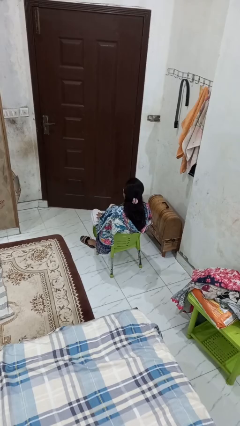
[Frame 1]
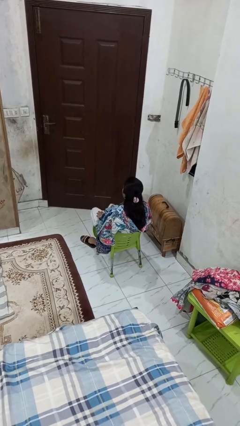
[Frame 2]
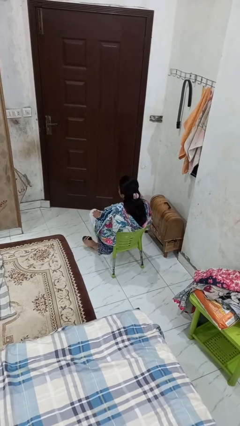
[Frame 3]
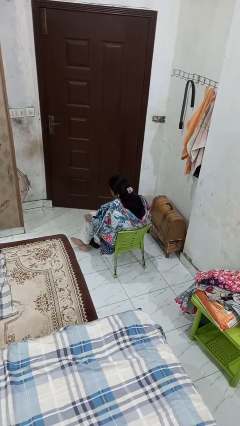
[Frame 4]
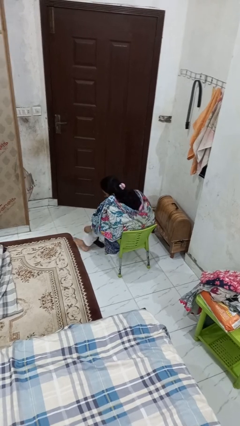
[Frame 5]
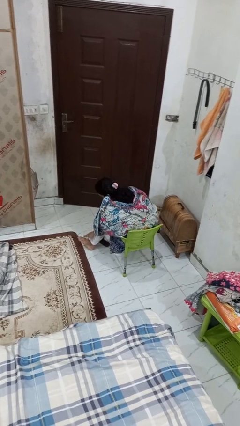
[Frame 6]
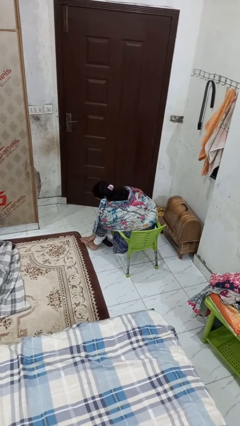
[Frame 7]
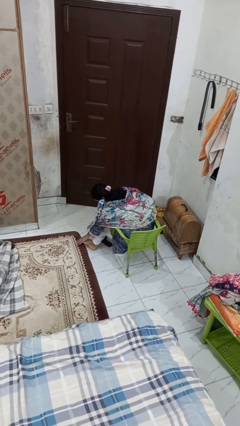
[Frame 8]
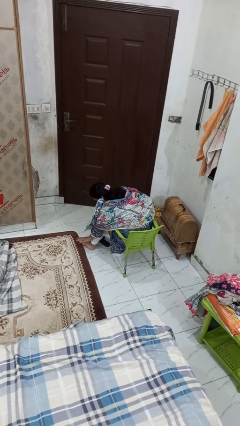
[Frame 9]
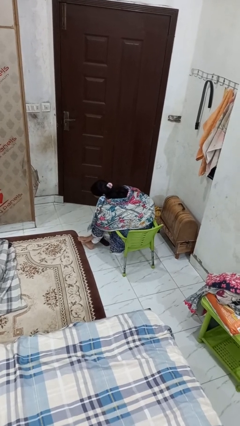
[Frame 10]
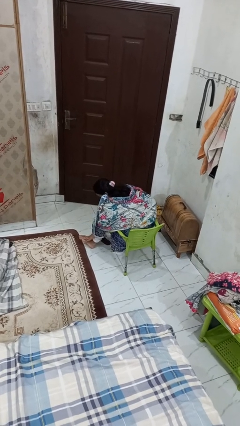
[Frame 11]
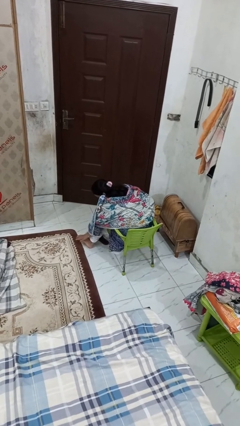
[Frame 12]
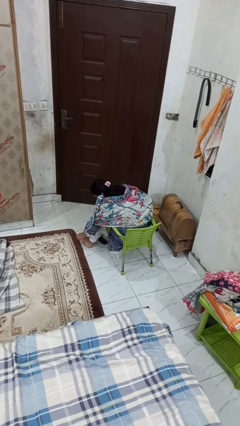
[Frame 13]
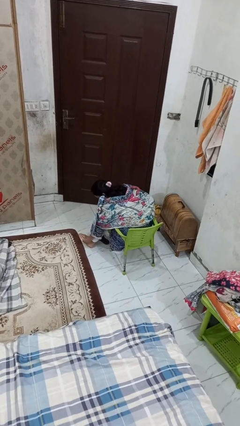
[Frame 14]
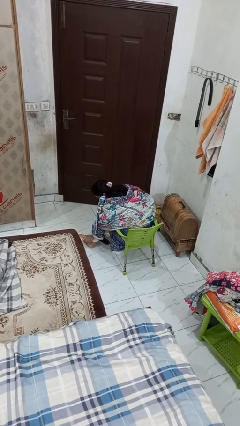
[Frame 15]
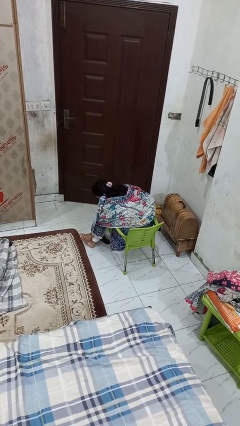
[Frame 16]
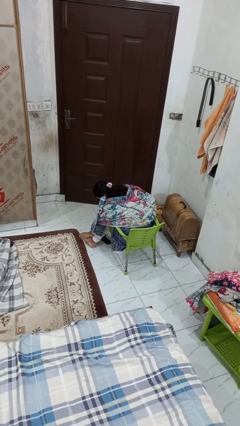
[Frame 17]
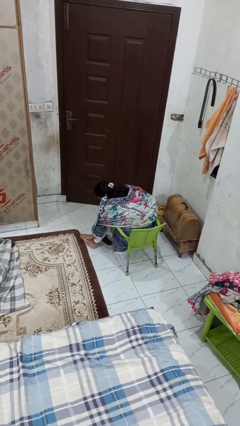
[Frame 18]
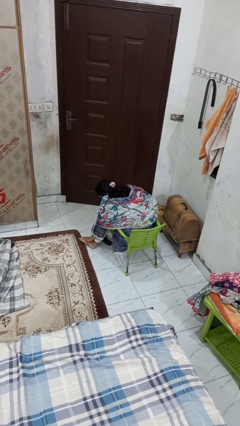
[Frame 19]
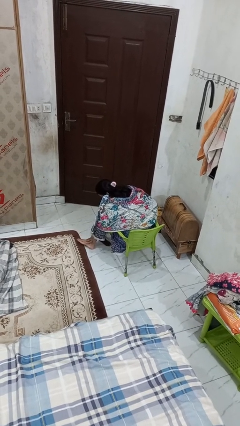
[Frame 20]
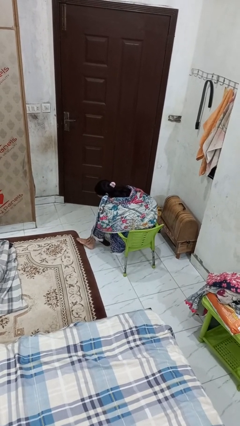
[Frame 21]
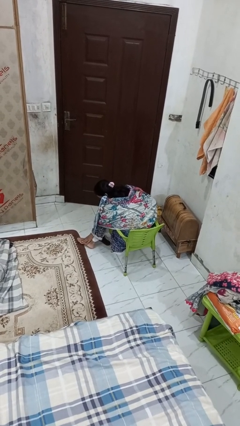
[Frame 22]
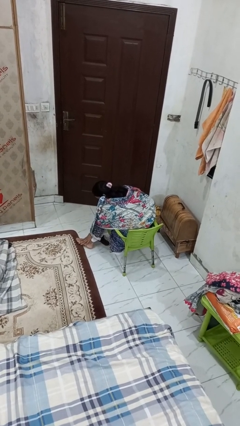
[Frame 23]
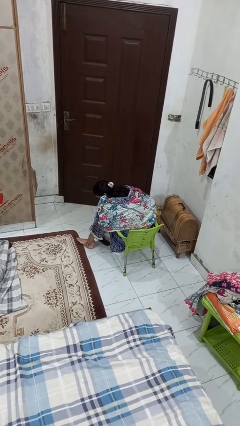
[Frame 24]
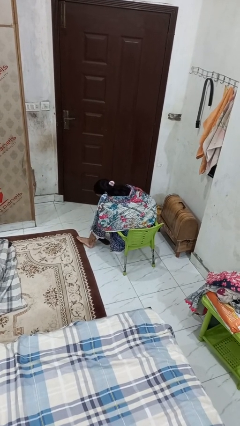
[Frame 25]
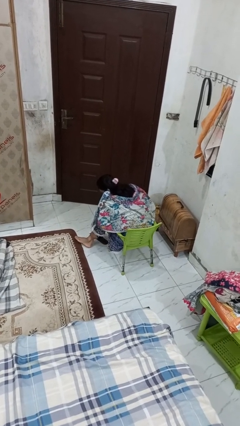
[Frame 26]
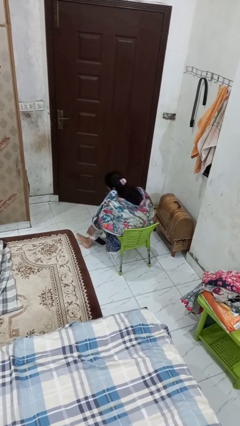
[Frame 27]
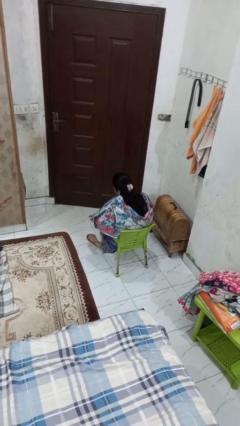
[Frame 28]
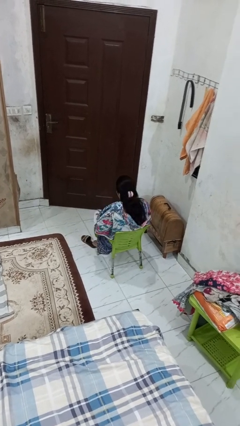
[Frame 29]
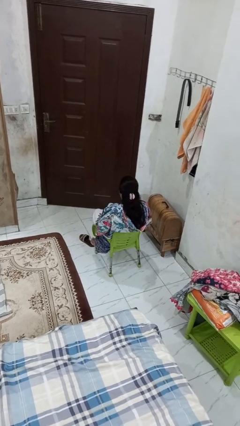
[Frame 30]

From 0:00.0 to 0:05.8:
person rubs foot

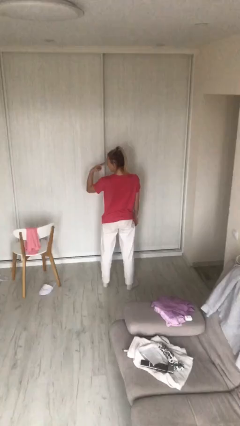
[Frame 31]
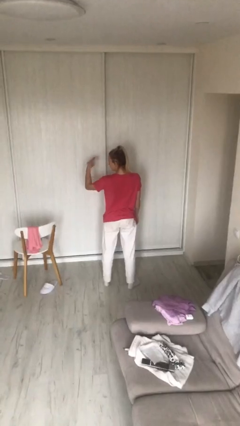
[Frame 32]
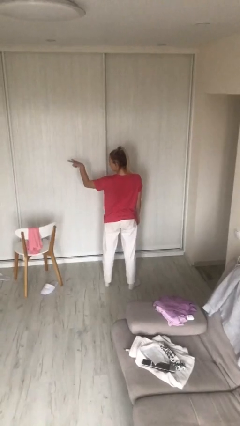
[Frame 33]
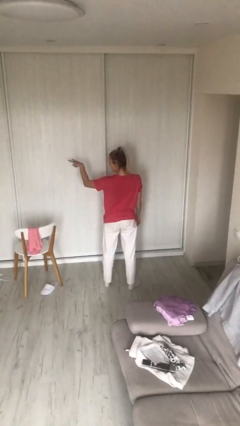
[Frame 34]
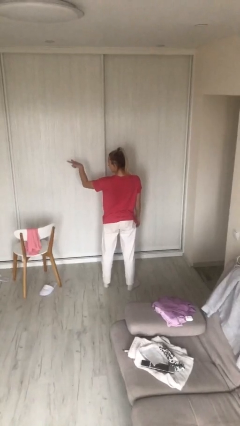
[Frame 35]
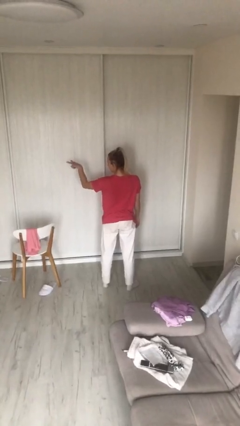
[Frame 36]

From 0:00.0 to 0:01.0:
person gestures watch closely

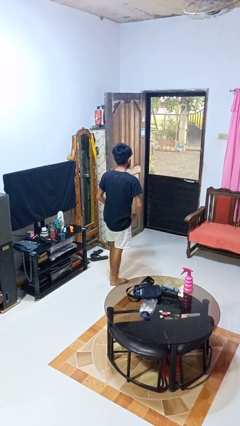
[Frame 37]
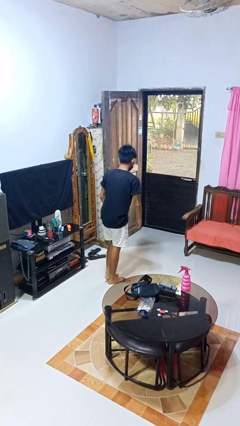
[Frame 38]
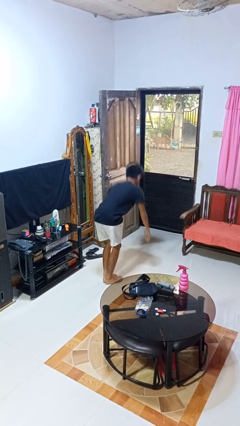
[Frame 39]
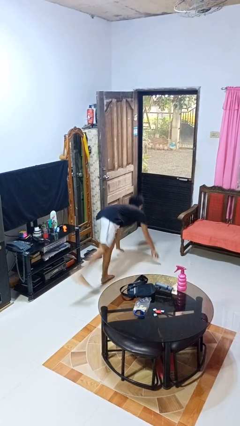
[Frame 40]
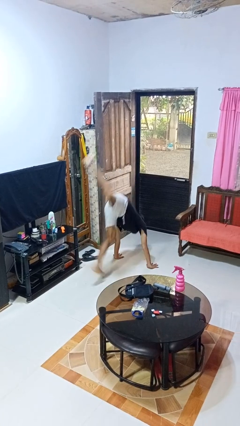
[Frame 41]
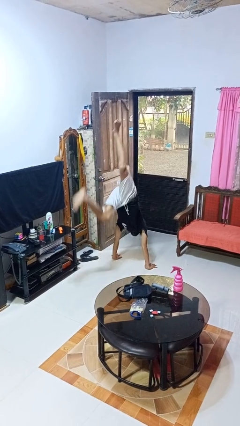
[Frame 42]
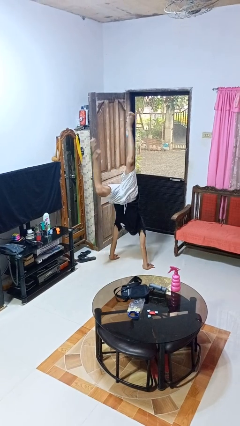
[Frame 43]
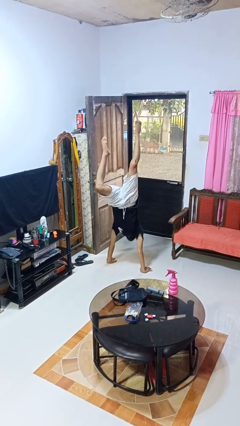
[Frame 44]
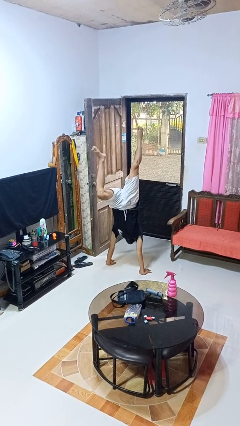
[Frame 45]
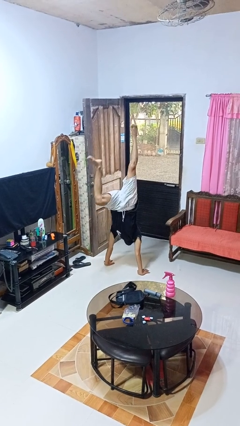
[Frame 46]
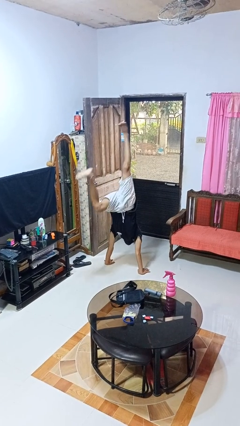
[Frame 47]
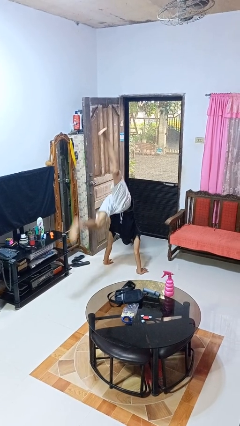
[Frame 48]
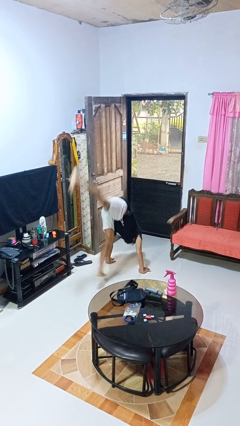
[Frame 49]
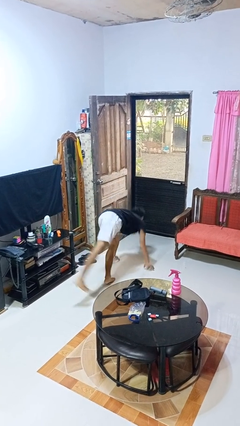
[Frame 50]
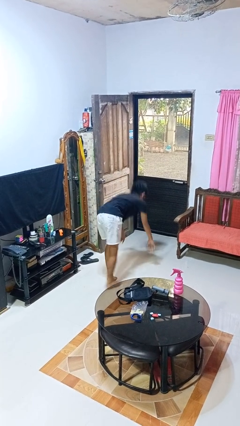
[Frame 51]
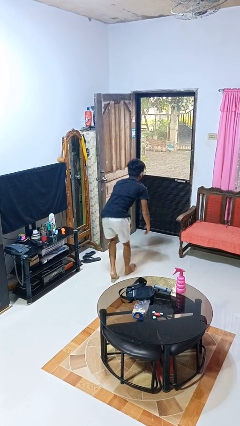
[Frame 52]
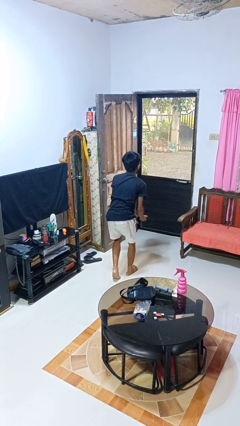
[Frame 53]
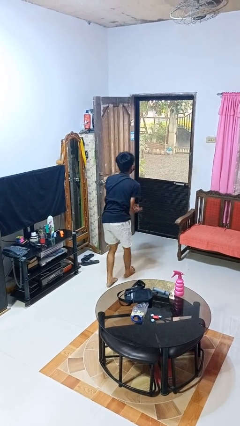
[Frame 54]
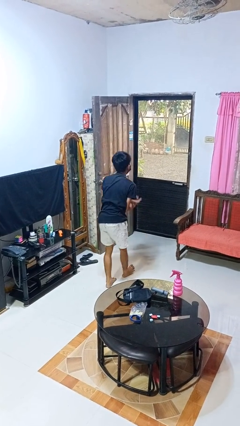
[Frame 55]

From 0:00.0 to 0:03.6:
person handstand

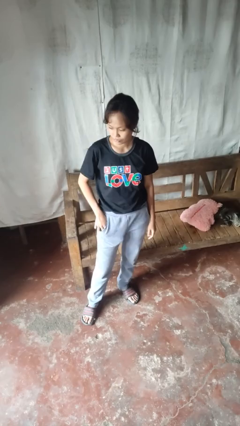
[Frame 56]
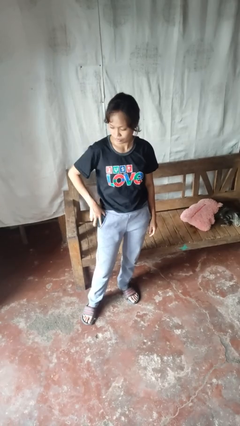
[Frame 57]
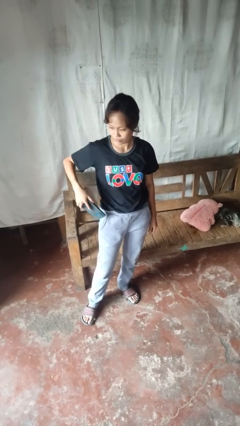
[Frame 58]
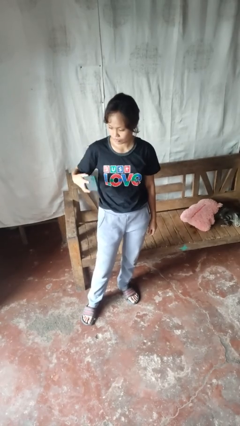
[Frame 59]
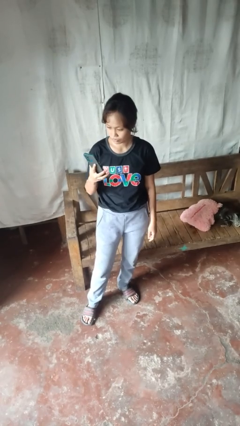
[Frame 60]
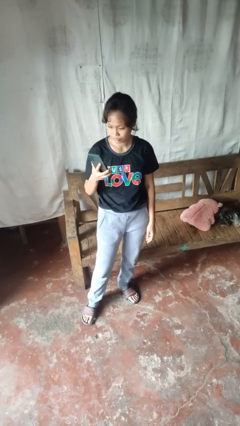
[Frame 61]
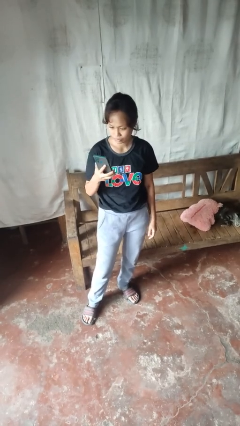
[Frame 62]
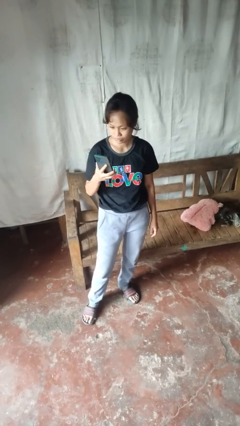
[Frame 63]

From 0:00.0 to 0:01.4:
person takes phone from pocket

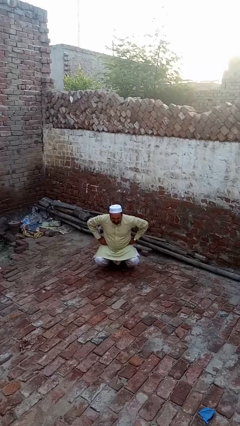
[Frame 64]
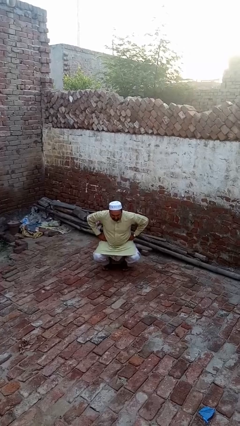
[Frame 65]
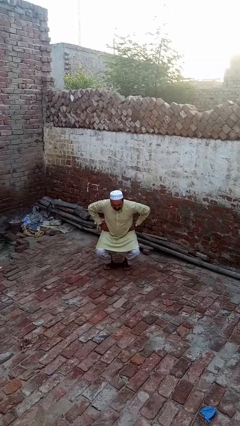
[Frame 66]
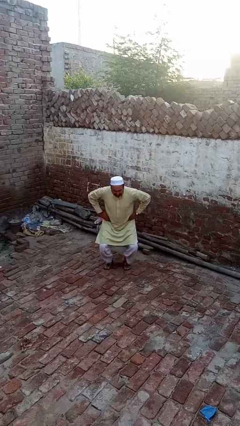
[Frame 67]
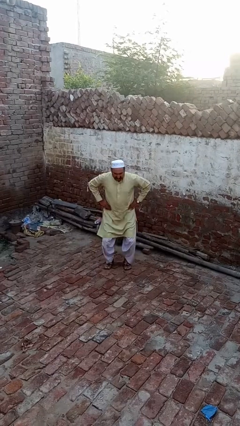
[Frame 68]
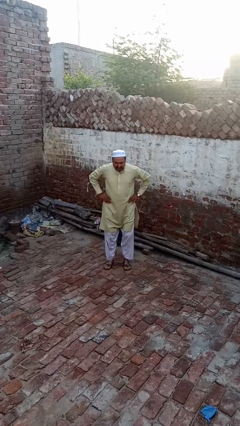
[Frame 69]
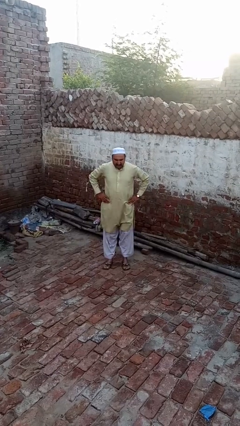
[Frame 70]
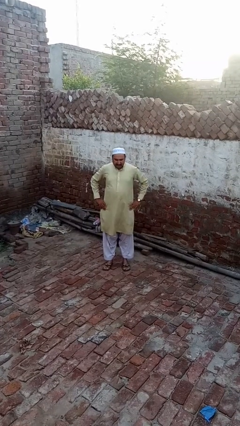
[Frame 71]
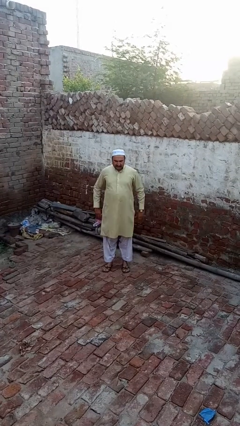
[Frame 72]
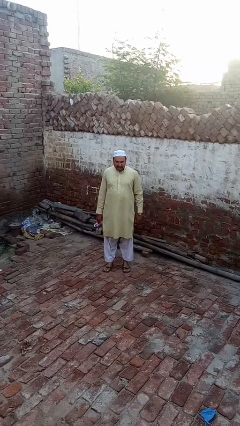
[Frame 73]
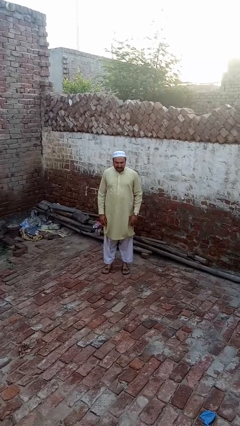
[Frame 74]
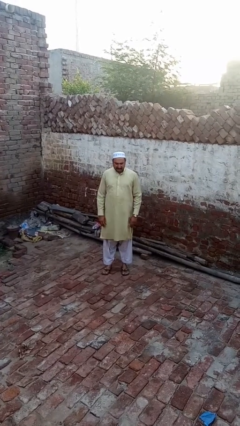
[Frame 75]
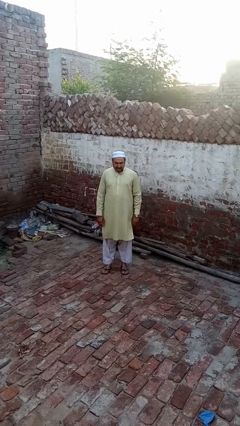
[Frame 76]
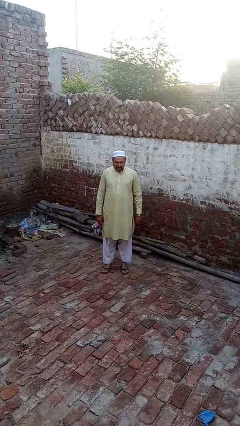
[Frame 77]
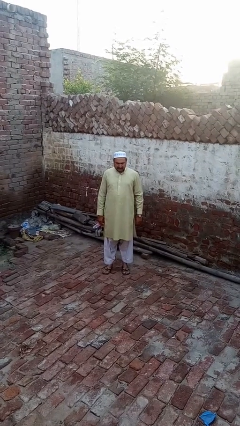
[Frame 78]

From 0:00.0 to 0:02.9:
person stands up

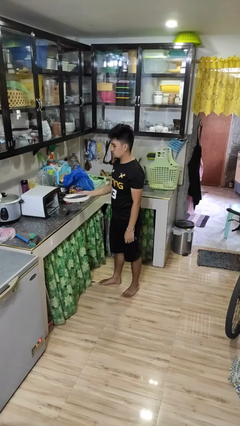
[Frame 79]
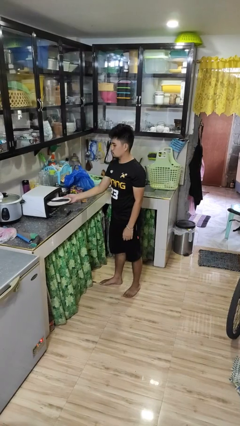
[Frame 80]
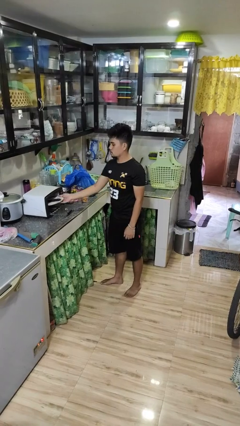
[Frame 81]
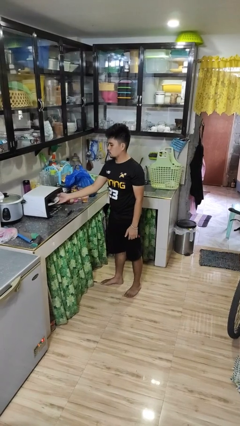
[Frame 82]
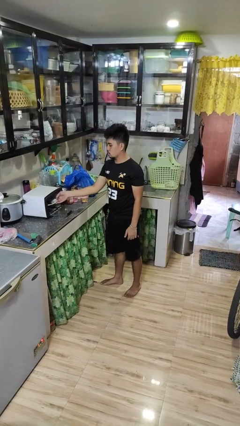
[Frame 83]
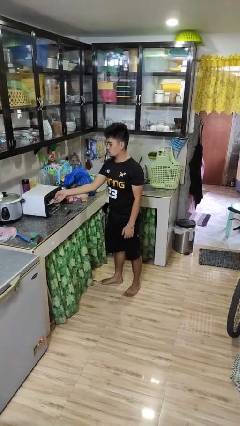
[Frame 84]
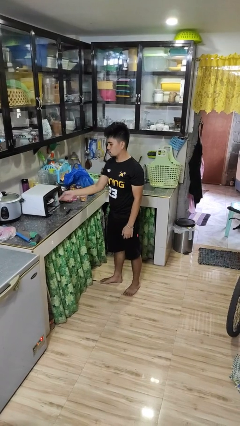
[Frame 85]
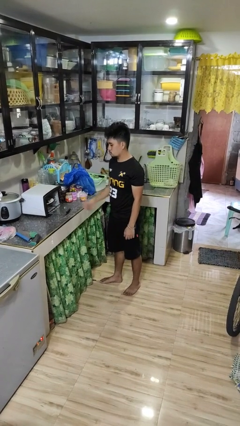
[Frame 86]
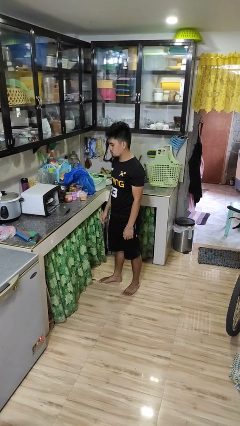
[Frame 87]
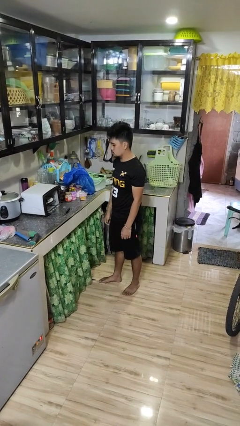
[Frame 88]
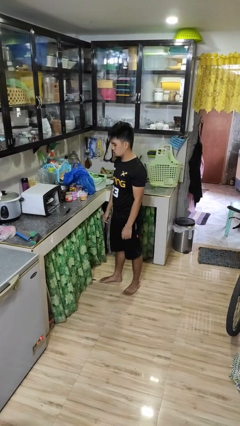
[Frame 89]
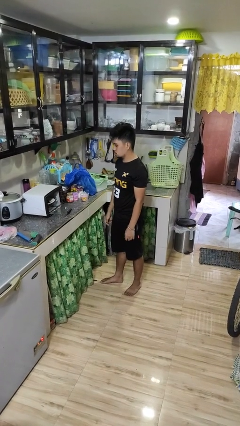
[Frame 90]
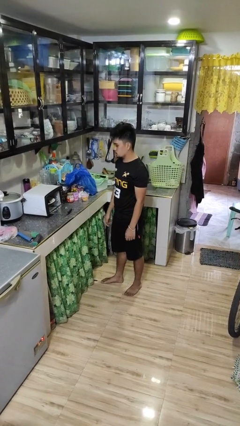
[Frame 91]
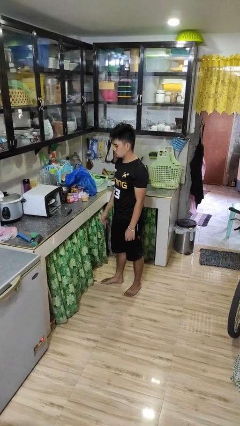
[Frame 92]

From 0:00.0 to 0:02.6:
person puts object into microwave
